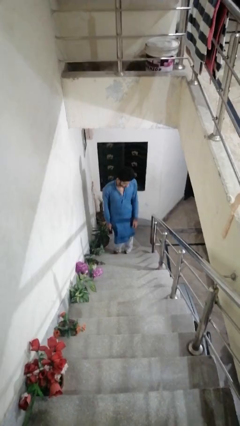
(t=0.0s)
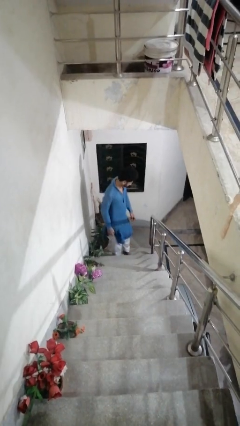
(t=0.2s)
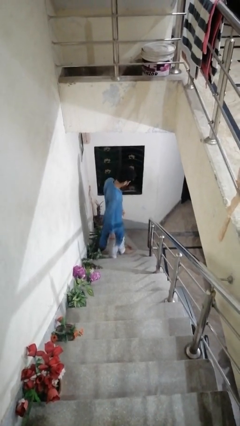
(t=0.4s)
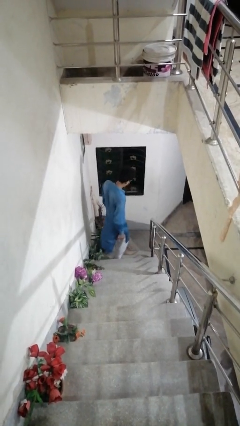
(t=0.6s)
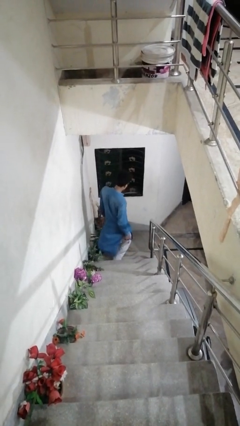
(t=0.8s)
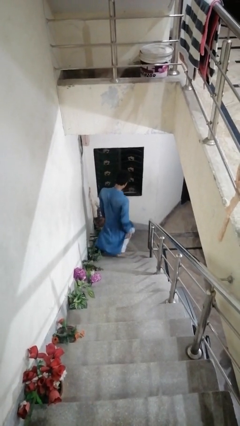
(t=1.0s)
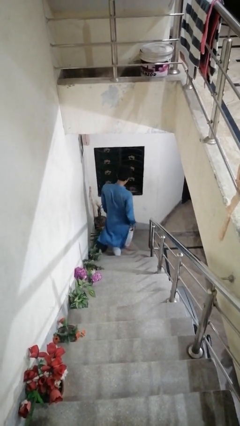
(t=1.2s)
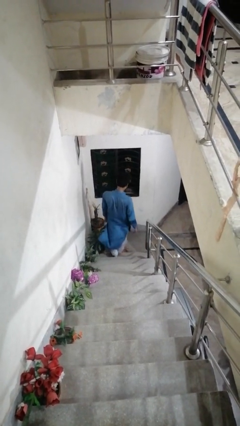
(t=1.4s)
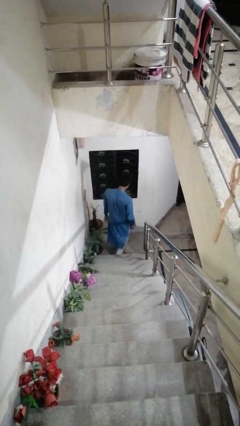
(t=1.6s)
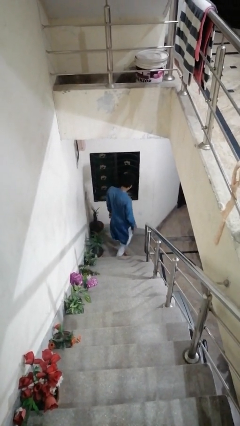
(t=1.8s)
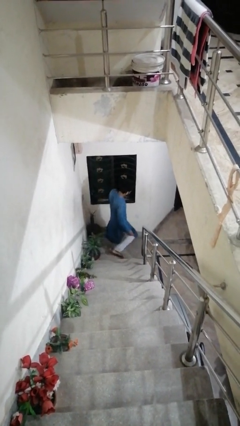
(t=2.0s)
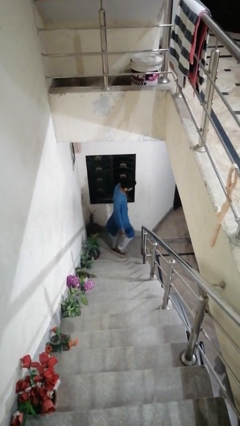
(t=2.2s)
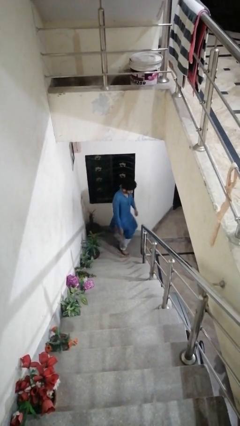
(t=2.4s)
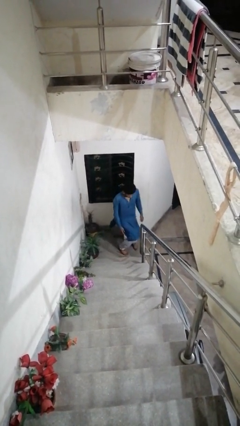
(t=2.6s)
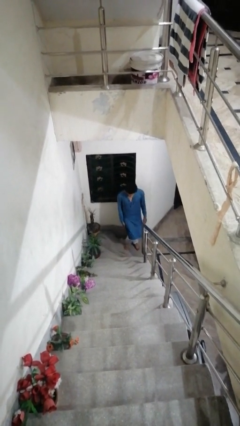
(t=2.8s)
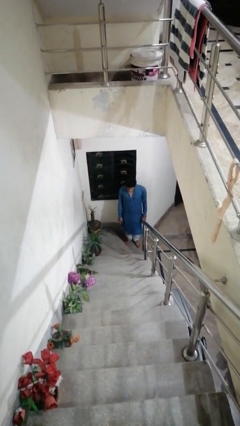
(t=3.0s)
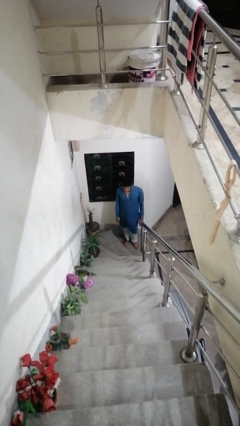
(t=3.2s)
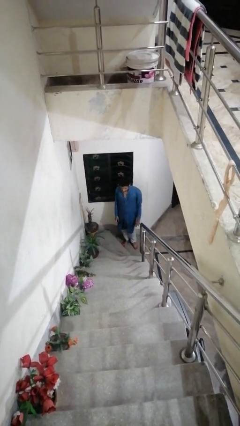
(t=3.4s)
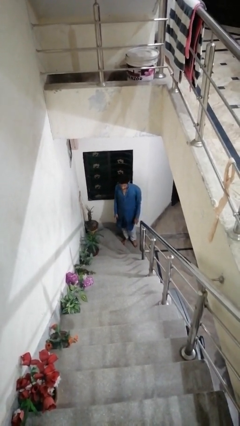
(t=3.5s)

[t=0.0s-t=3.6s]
person climbs down stairs

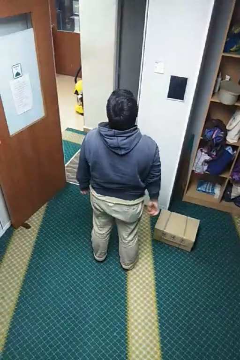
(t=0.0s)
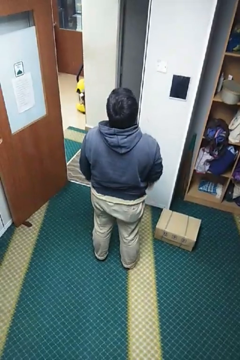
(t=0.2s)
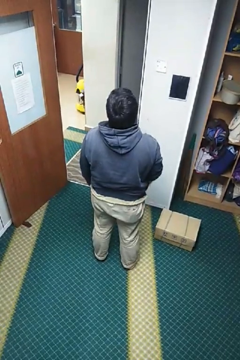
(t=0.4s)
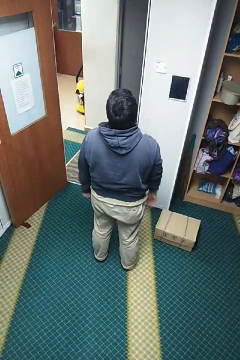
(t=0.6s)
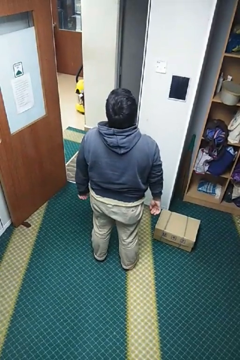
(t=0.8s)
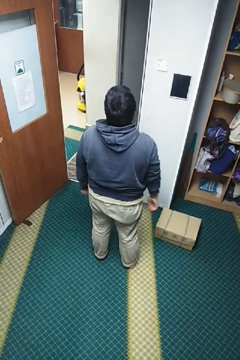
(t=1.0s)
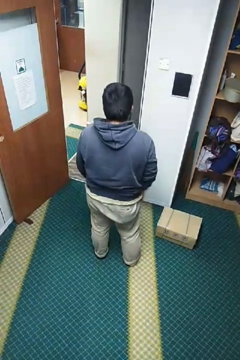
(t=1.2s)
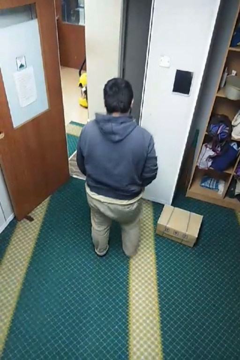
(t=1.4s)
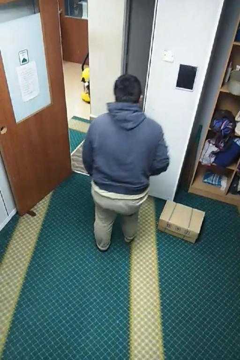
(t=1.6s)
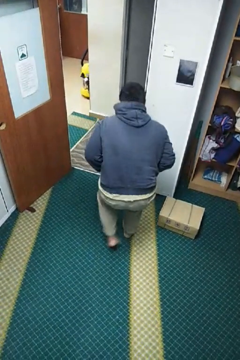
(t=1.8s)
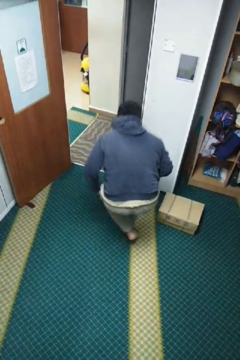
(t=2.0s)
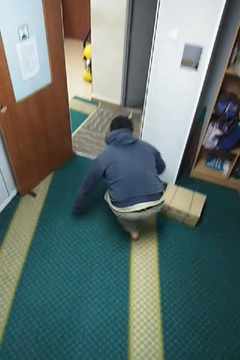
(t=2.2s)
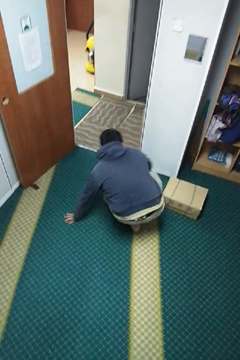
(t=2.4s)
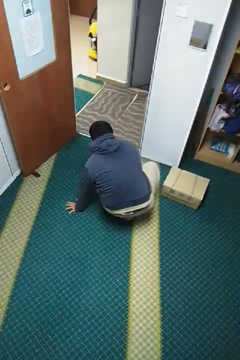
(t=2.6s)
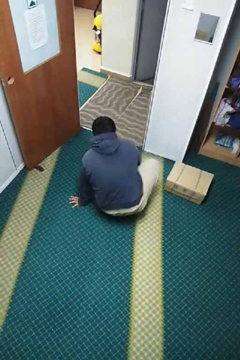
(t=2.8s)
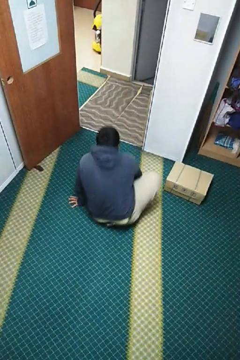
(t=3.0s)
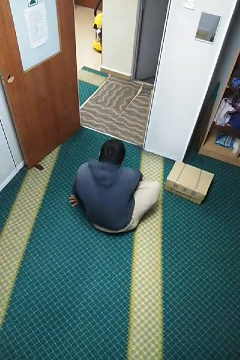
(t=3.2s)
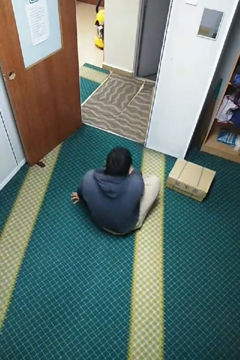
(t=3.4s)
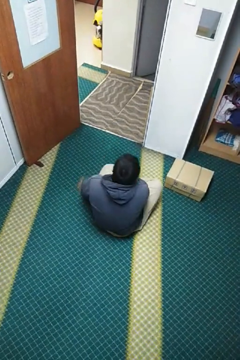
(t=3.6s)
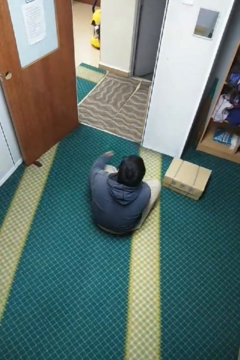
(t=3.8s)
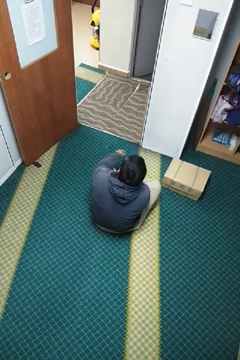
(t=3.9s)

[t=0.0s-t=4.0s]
person sits crisscross

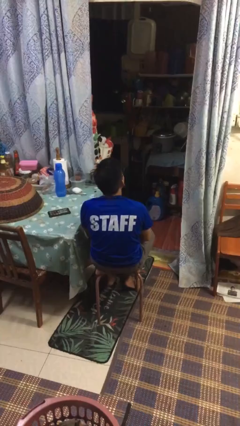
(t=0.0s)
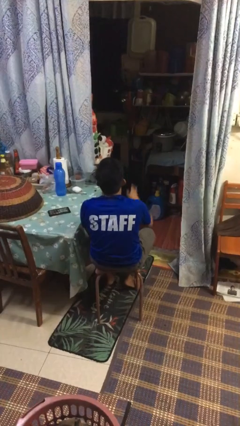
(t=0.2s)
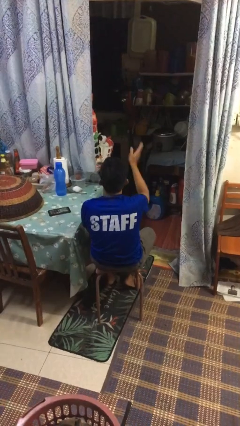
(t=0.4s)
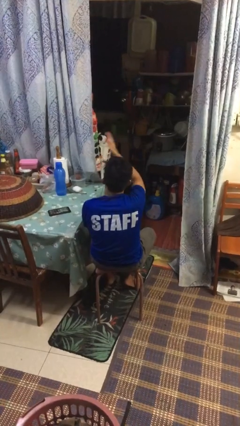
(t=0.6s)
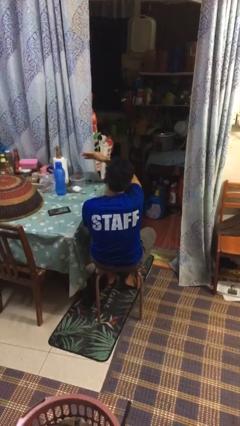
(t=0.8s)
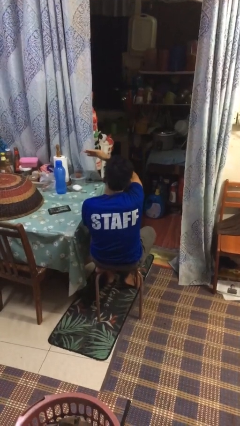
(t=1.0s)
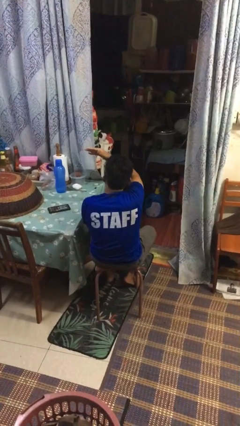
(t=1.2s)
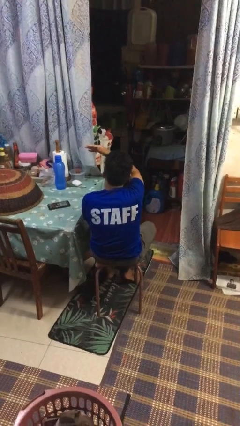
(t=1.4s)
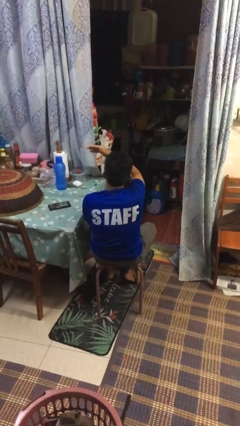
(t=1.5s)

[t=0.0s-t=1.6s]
person gestures swipe left

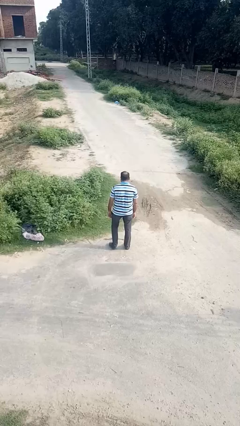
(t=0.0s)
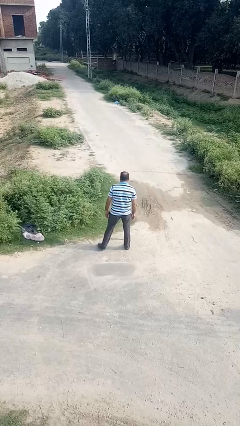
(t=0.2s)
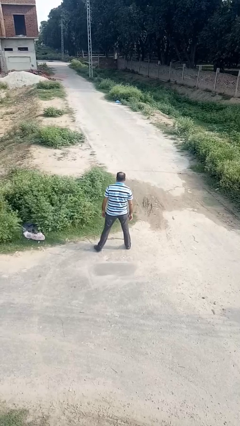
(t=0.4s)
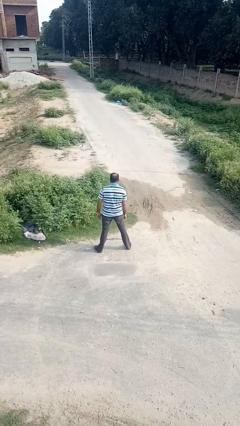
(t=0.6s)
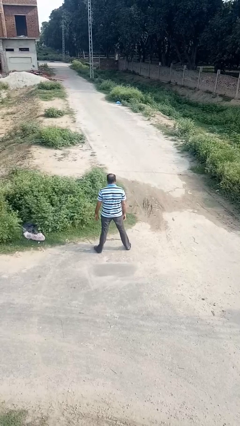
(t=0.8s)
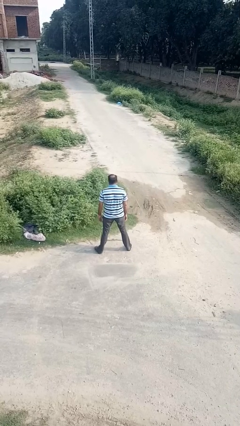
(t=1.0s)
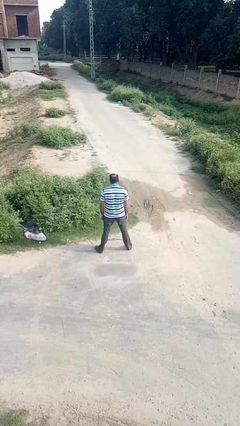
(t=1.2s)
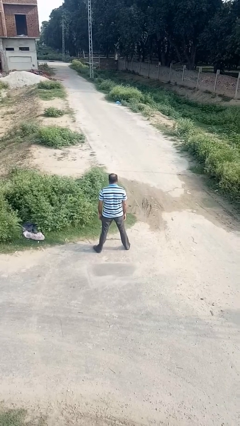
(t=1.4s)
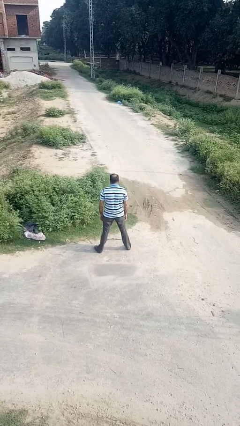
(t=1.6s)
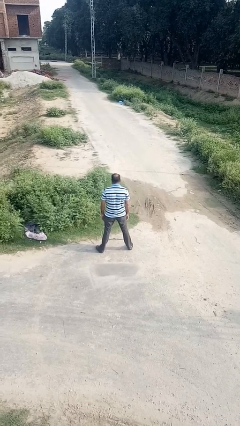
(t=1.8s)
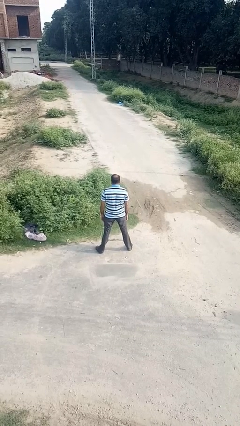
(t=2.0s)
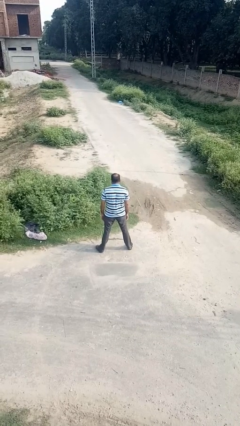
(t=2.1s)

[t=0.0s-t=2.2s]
person stretches back

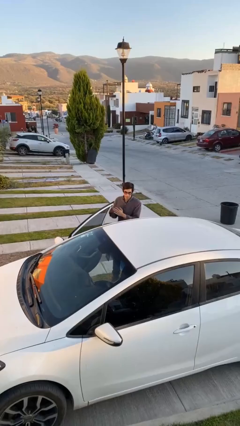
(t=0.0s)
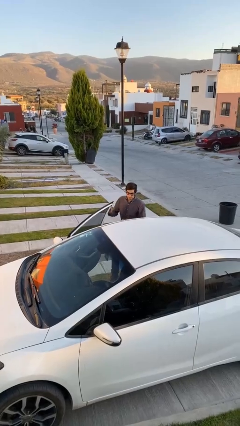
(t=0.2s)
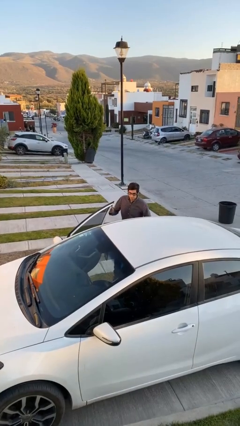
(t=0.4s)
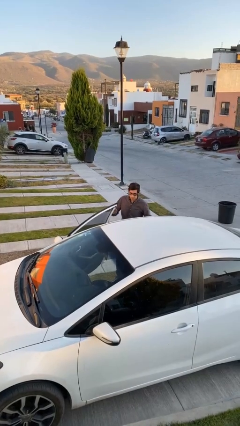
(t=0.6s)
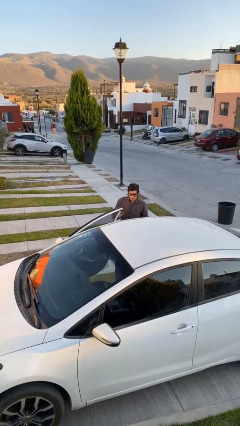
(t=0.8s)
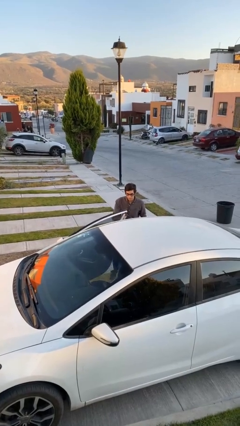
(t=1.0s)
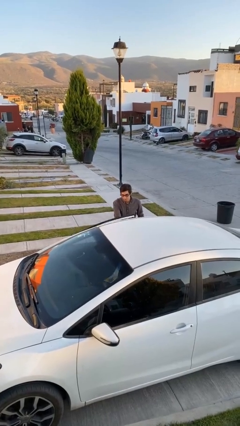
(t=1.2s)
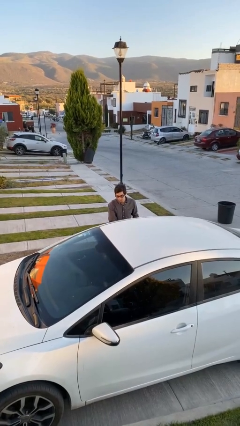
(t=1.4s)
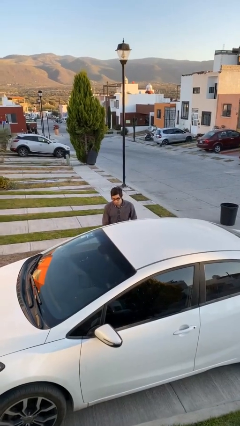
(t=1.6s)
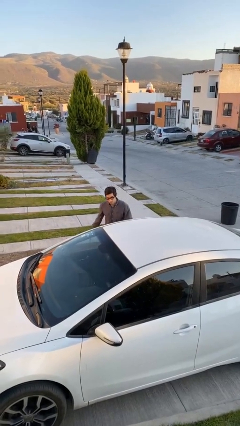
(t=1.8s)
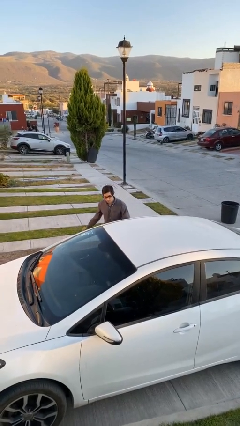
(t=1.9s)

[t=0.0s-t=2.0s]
person closes car door

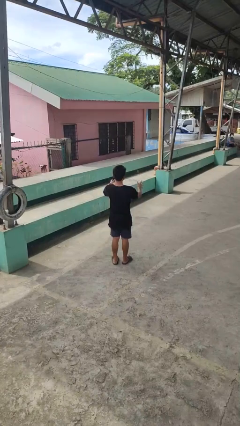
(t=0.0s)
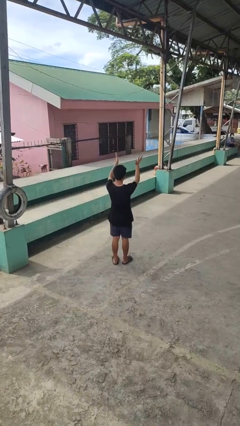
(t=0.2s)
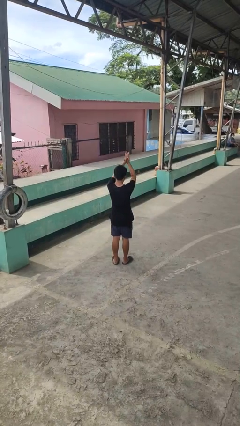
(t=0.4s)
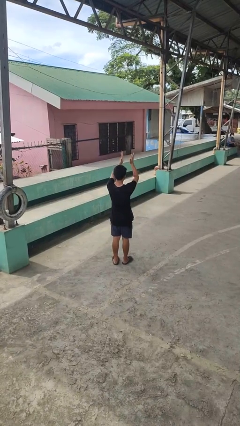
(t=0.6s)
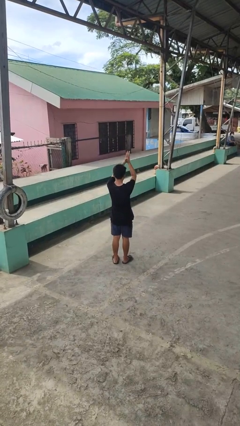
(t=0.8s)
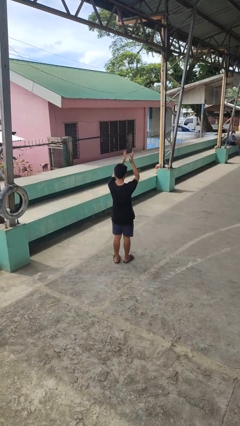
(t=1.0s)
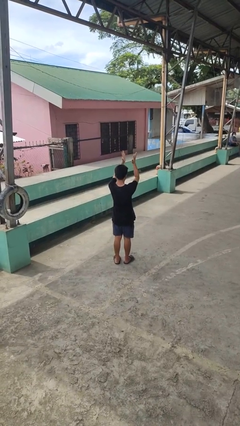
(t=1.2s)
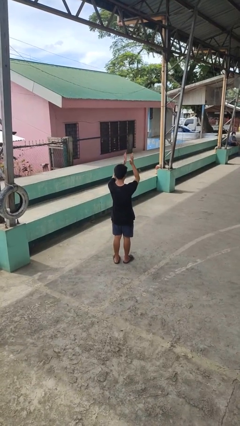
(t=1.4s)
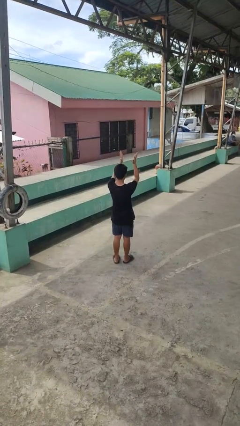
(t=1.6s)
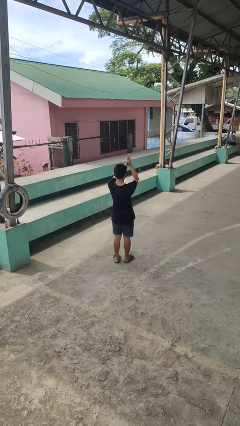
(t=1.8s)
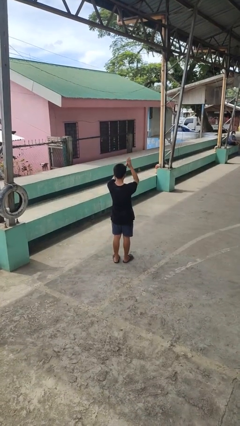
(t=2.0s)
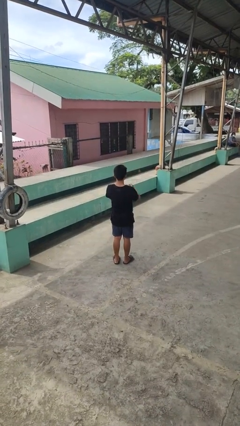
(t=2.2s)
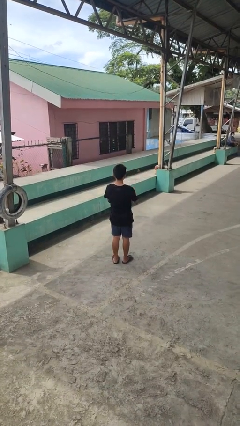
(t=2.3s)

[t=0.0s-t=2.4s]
person claps hands

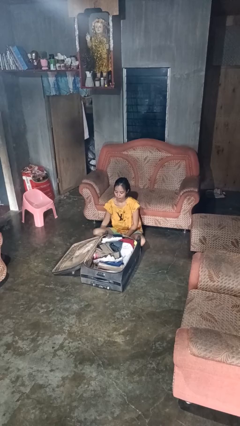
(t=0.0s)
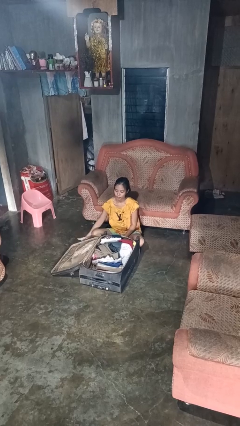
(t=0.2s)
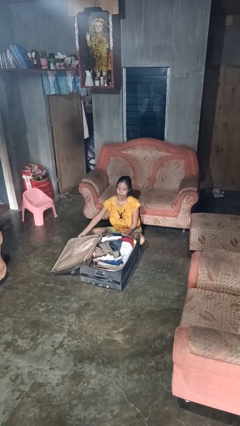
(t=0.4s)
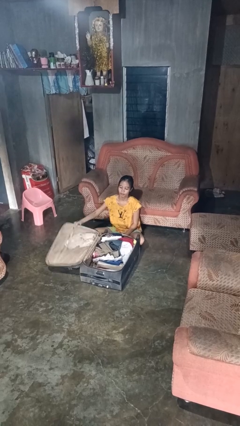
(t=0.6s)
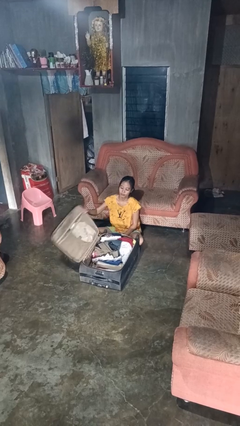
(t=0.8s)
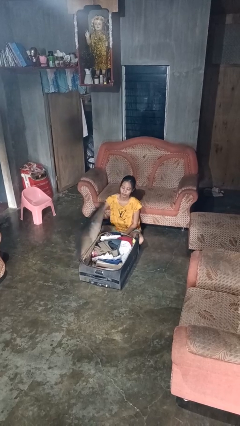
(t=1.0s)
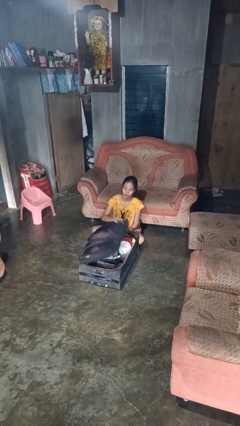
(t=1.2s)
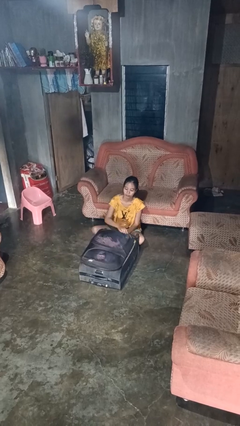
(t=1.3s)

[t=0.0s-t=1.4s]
person closes suitcase

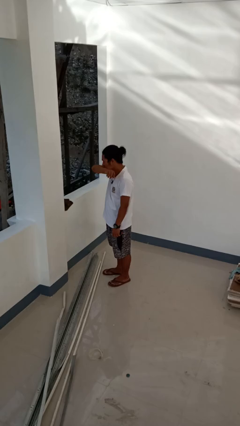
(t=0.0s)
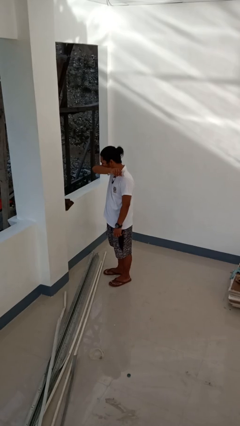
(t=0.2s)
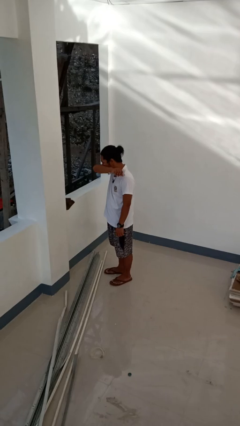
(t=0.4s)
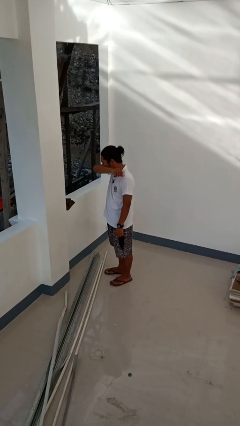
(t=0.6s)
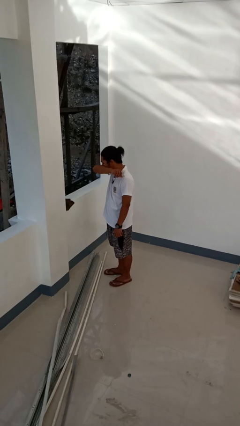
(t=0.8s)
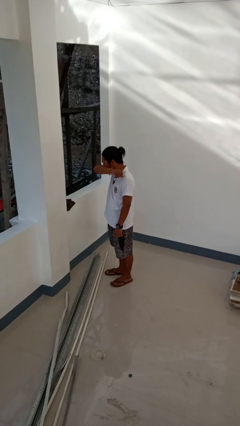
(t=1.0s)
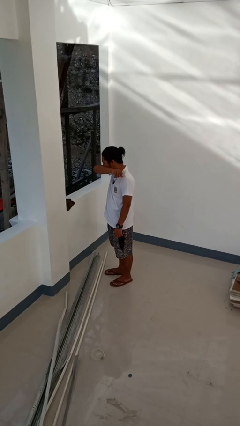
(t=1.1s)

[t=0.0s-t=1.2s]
person sneezes into arm
